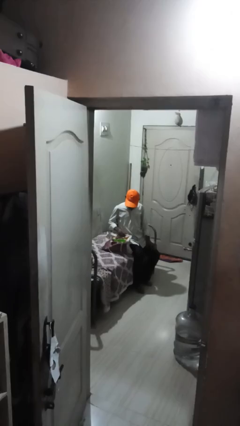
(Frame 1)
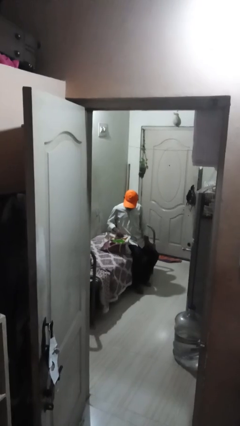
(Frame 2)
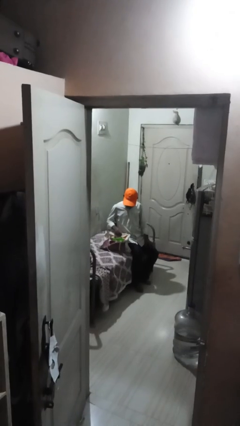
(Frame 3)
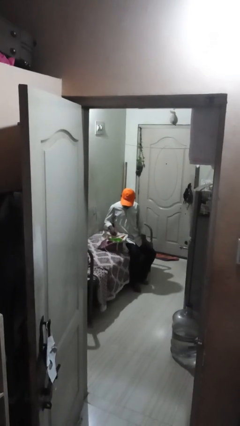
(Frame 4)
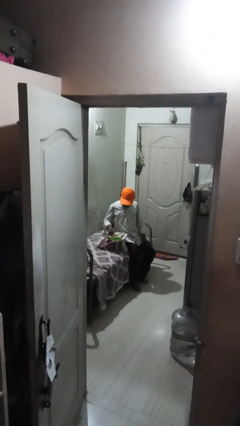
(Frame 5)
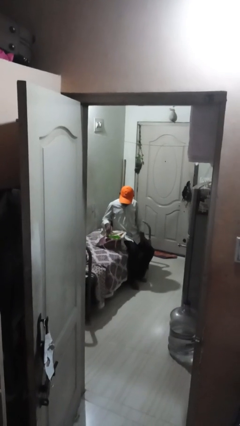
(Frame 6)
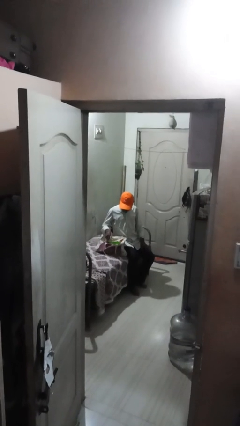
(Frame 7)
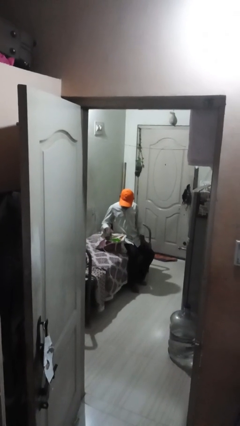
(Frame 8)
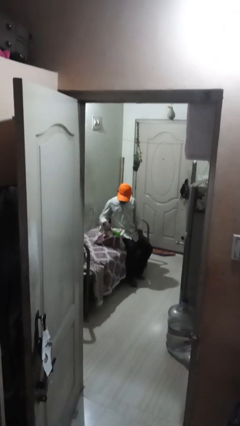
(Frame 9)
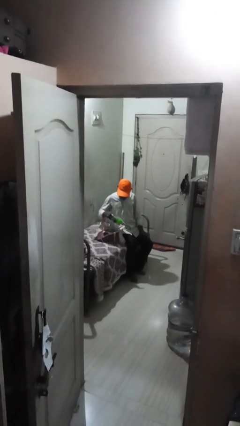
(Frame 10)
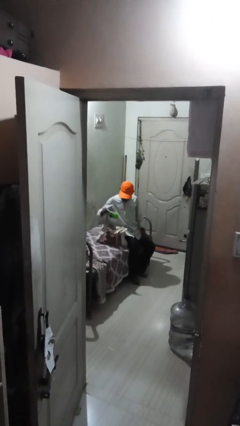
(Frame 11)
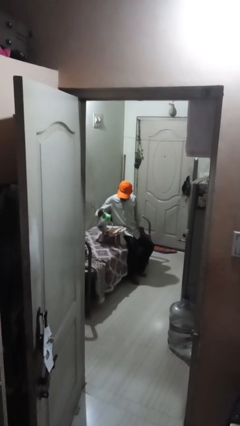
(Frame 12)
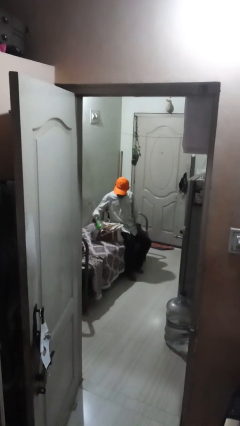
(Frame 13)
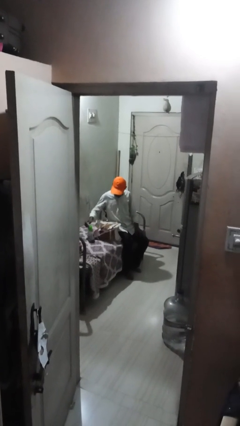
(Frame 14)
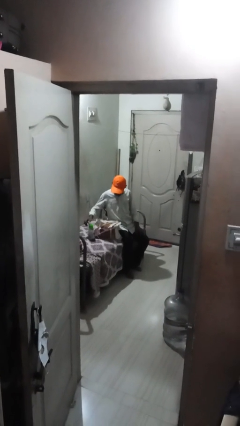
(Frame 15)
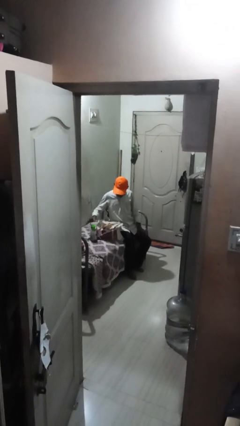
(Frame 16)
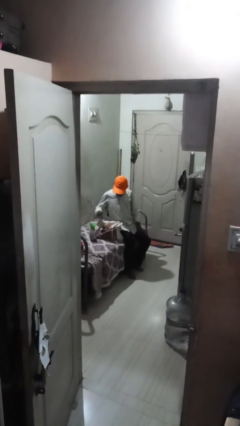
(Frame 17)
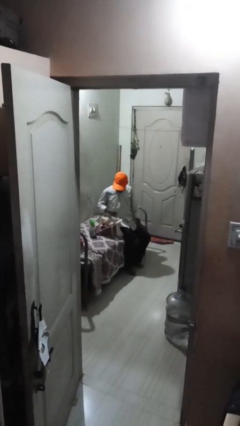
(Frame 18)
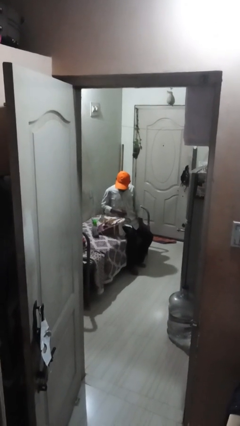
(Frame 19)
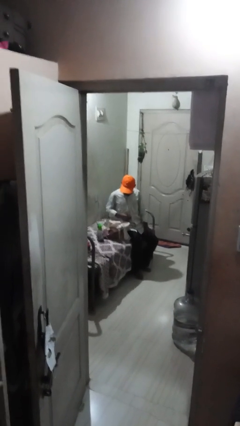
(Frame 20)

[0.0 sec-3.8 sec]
person takes object from bag

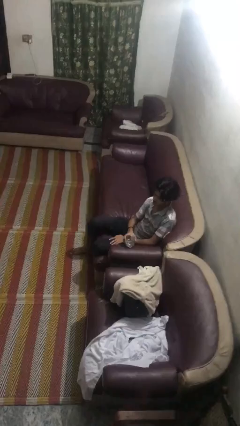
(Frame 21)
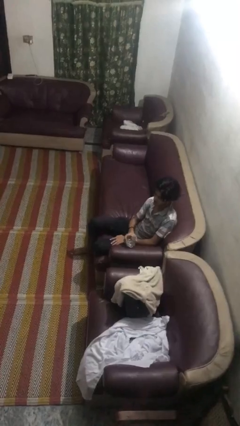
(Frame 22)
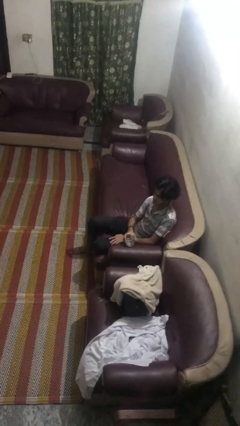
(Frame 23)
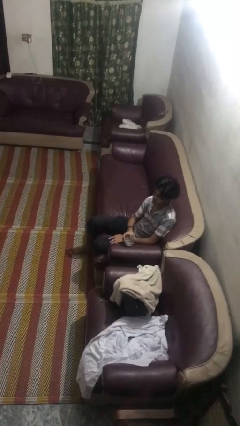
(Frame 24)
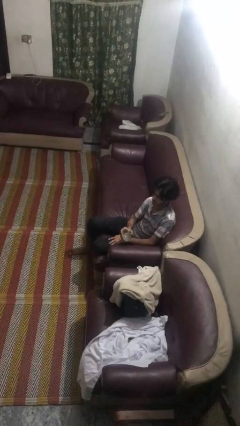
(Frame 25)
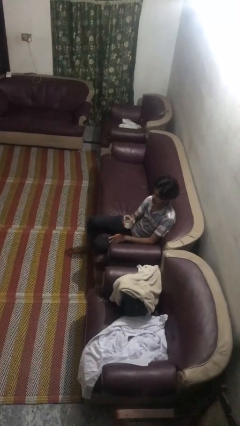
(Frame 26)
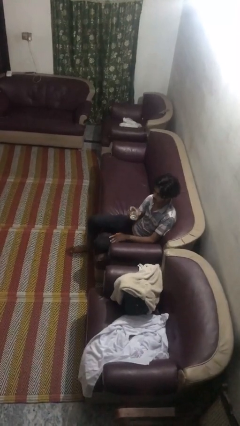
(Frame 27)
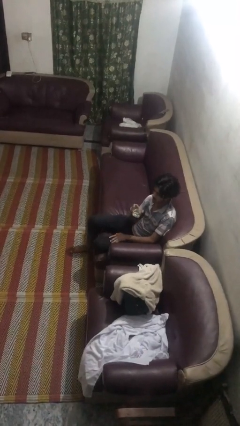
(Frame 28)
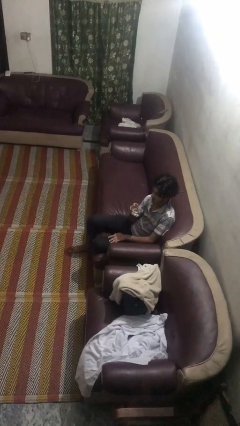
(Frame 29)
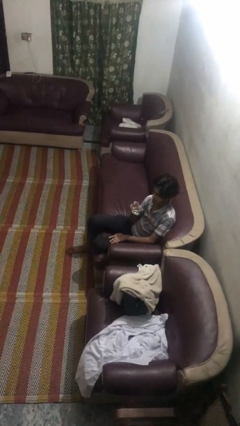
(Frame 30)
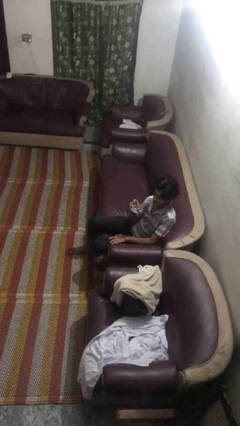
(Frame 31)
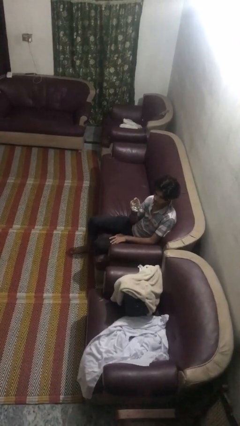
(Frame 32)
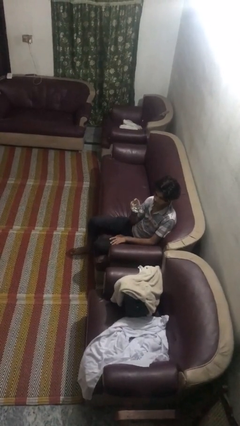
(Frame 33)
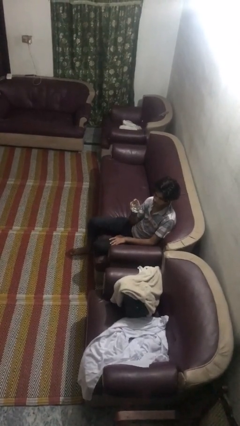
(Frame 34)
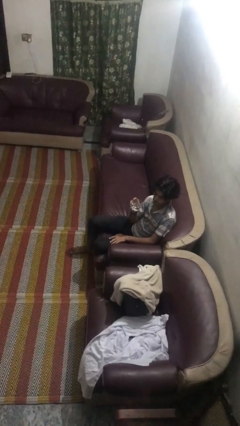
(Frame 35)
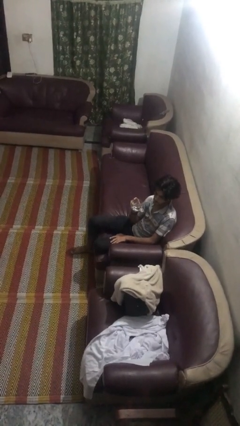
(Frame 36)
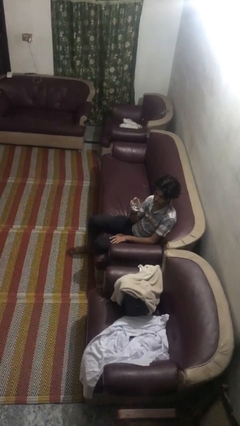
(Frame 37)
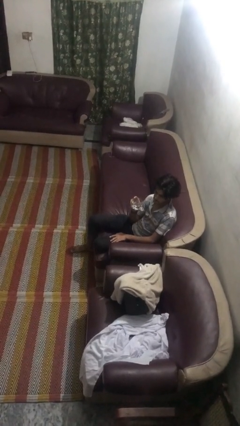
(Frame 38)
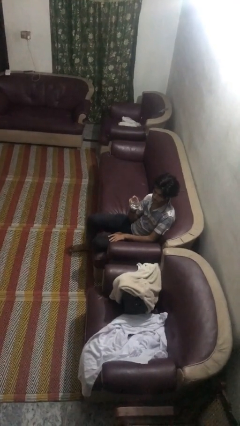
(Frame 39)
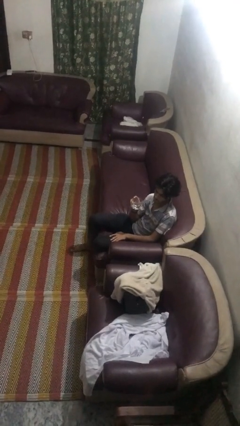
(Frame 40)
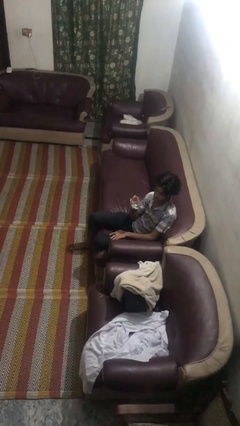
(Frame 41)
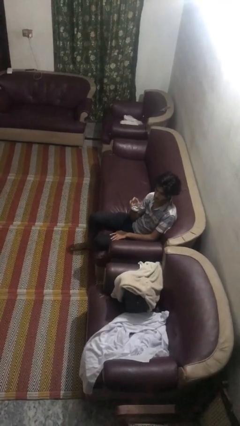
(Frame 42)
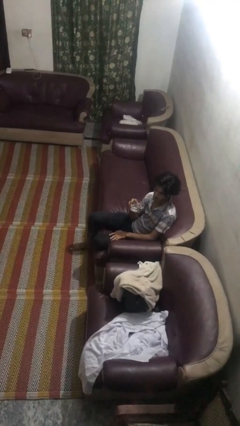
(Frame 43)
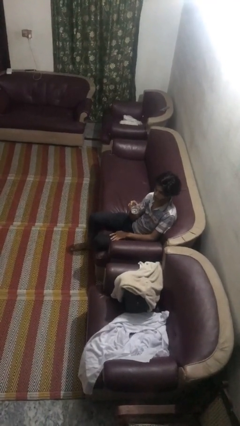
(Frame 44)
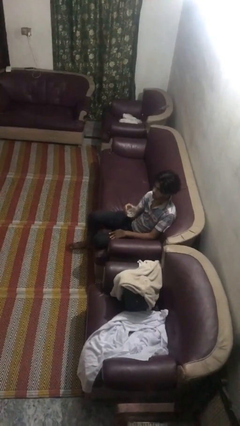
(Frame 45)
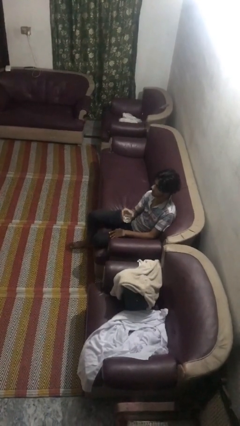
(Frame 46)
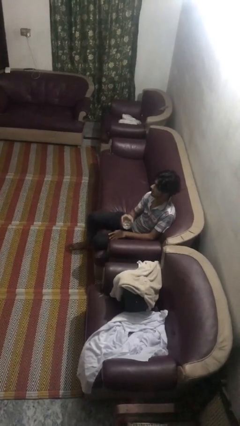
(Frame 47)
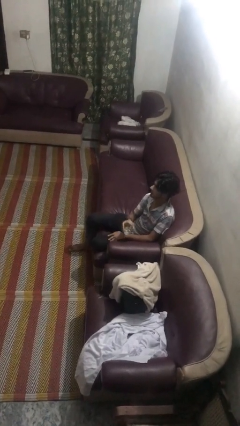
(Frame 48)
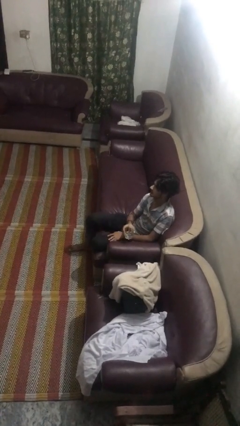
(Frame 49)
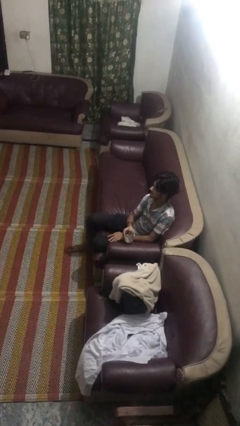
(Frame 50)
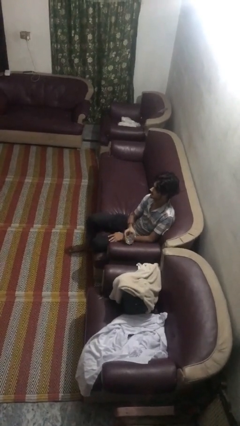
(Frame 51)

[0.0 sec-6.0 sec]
person drinks from straw

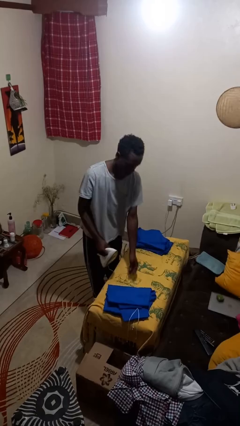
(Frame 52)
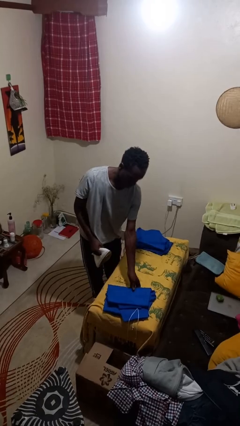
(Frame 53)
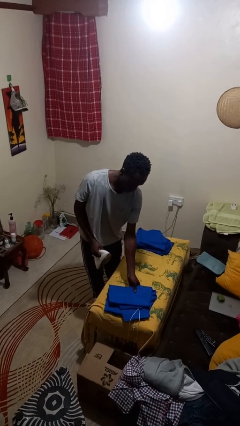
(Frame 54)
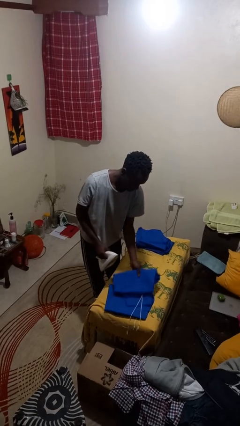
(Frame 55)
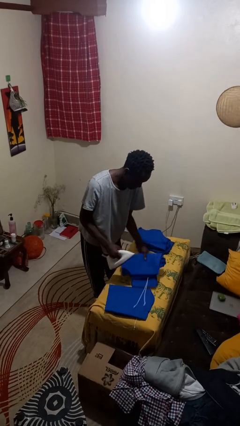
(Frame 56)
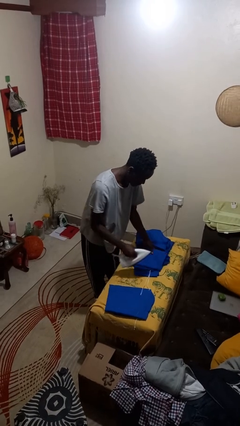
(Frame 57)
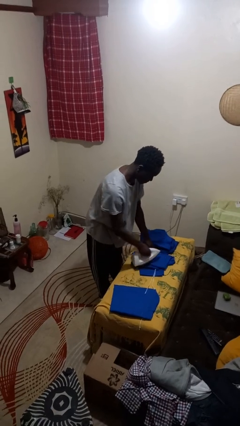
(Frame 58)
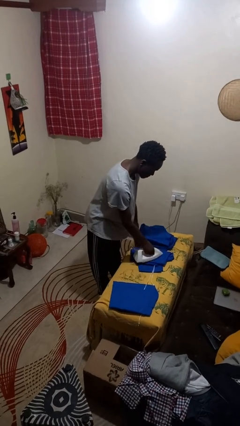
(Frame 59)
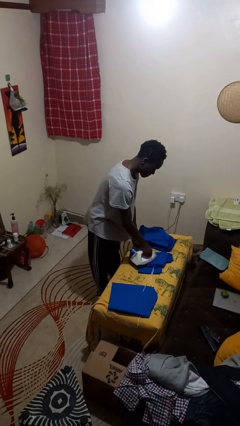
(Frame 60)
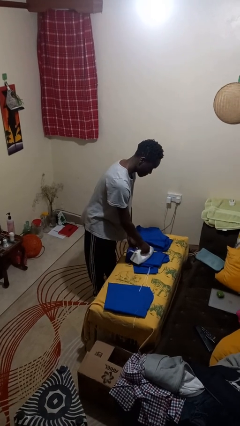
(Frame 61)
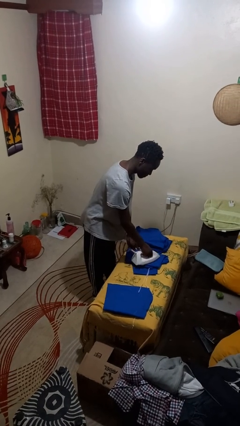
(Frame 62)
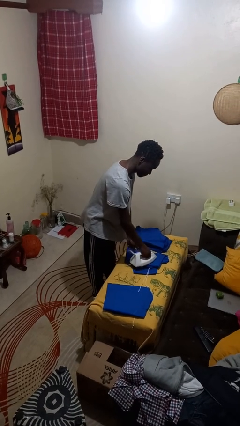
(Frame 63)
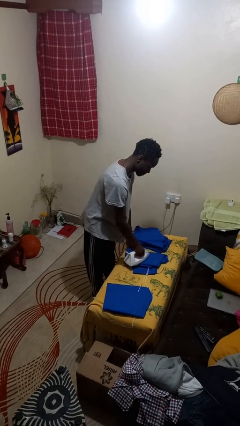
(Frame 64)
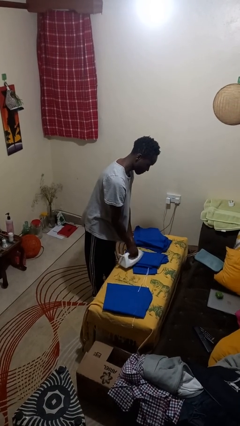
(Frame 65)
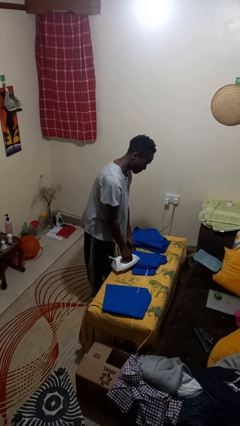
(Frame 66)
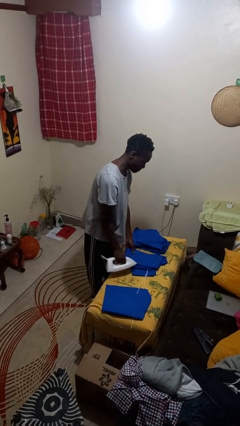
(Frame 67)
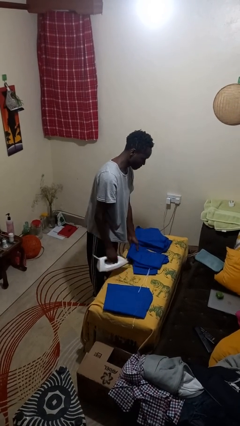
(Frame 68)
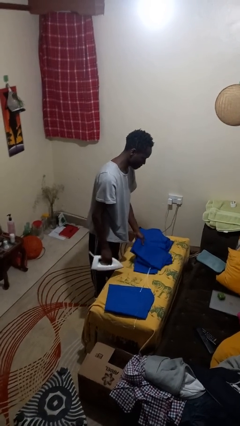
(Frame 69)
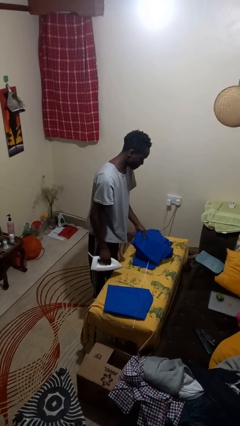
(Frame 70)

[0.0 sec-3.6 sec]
person irons clothes

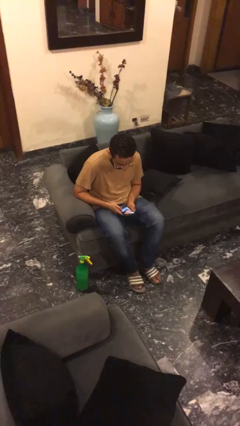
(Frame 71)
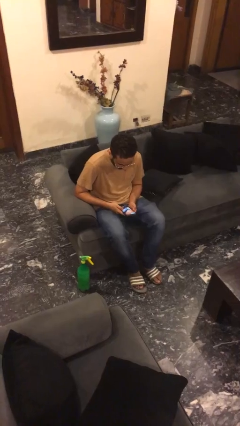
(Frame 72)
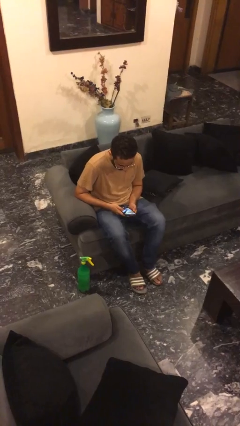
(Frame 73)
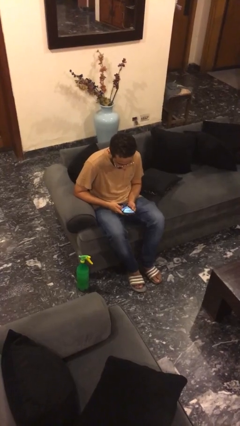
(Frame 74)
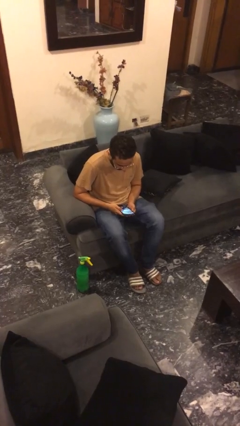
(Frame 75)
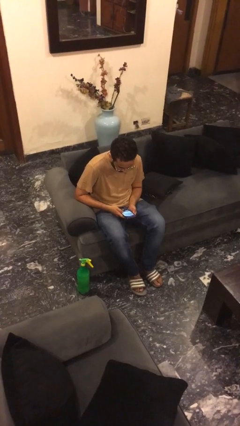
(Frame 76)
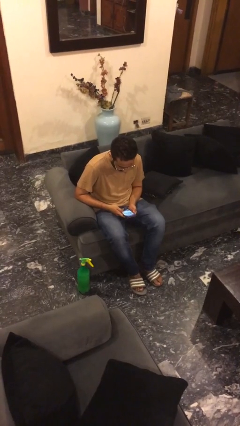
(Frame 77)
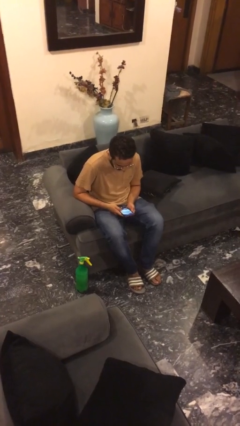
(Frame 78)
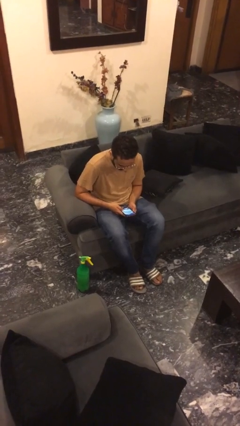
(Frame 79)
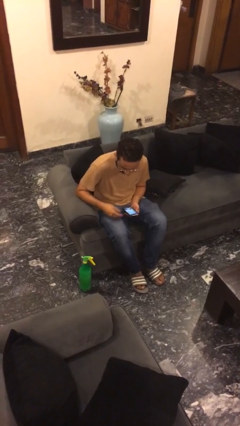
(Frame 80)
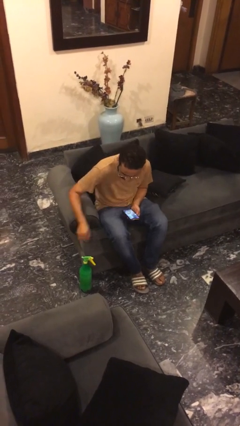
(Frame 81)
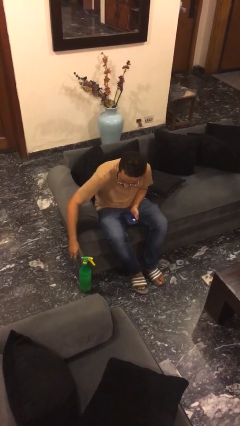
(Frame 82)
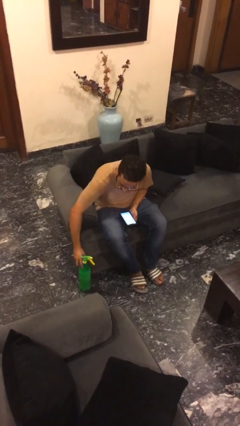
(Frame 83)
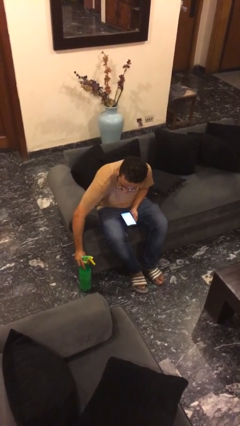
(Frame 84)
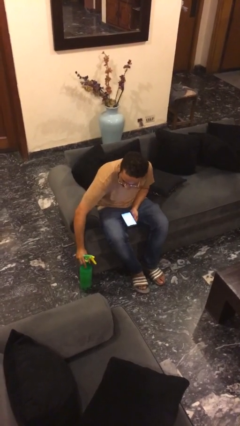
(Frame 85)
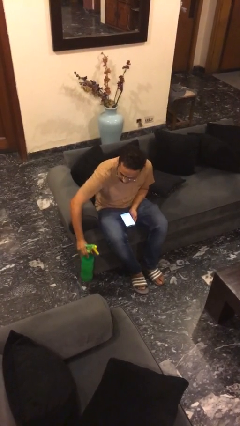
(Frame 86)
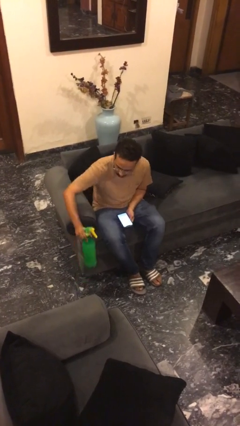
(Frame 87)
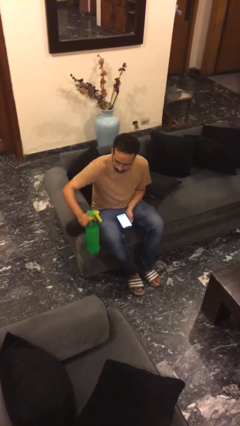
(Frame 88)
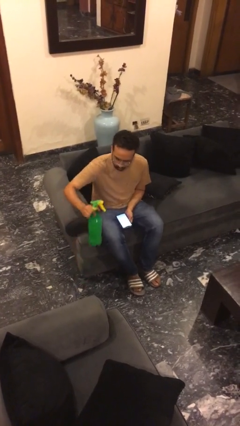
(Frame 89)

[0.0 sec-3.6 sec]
person picks up object from floor

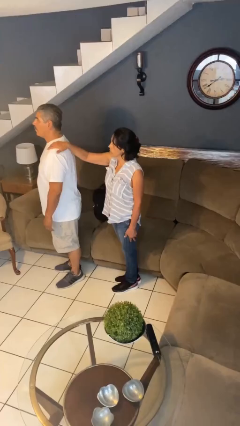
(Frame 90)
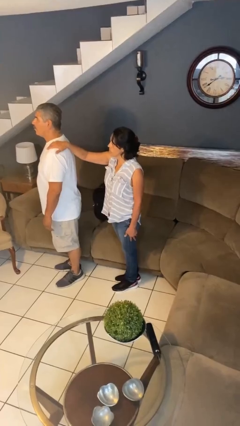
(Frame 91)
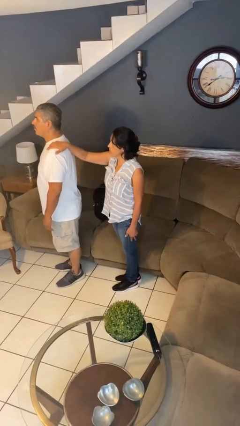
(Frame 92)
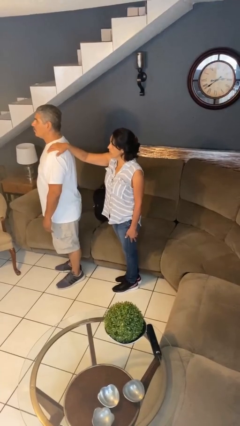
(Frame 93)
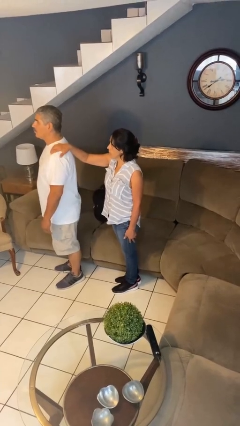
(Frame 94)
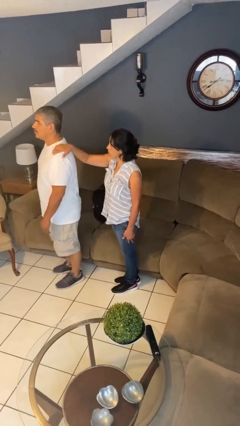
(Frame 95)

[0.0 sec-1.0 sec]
person grabs person by shoulder
